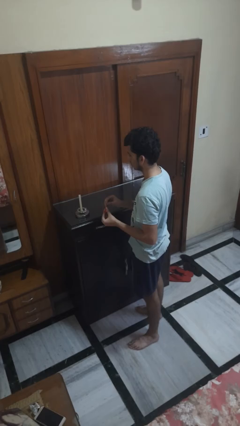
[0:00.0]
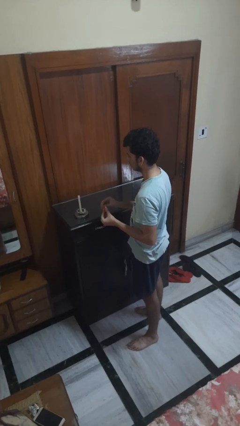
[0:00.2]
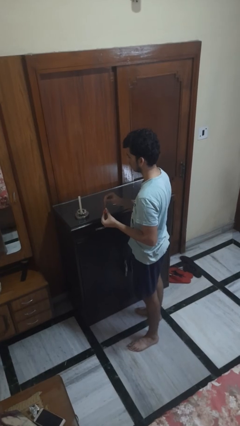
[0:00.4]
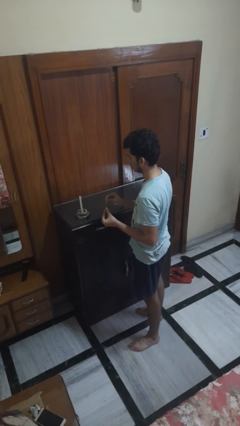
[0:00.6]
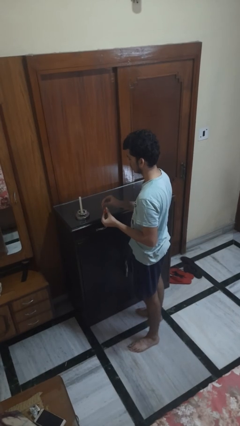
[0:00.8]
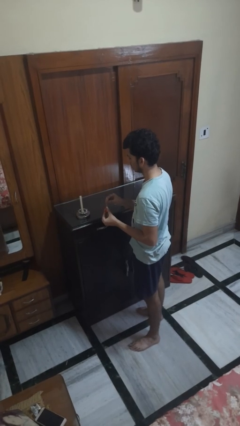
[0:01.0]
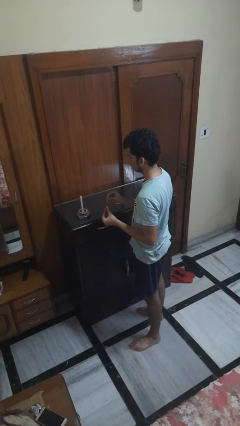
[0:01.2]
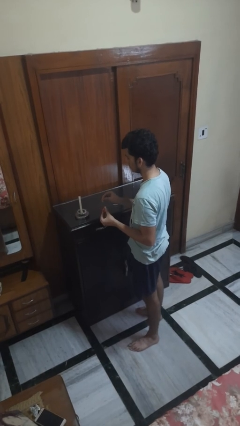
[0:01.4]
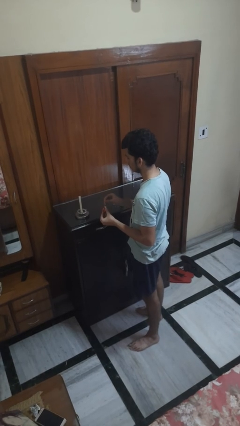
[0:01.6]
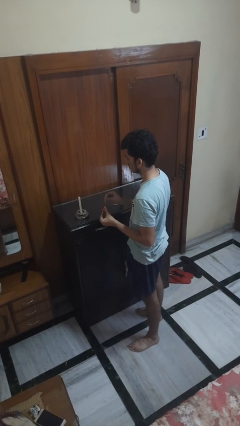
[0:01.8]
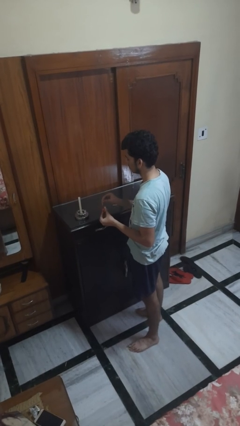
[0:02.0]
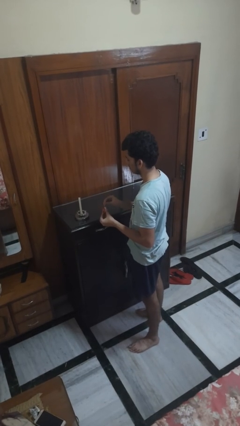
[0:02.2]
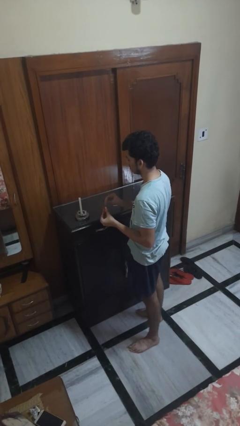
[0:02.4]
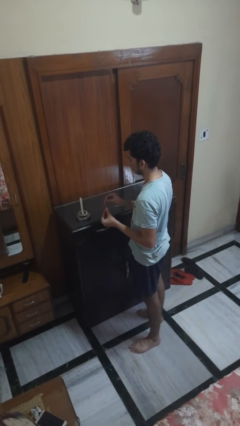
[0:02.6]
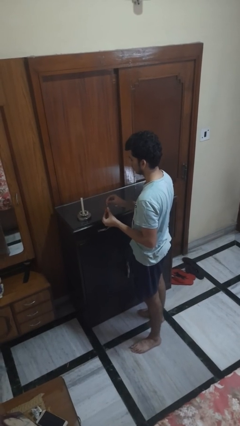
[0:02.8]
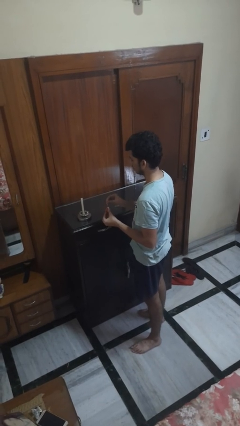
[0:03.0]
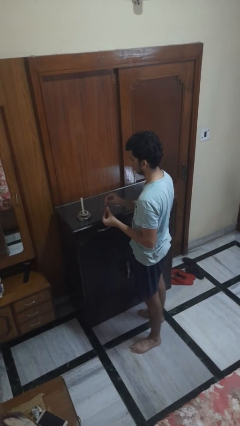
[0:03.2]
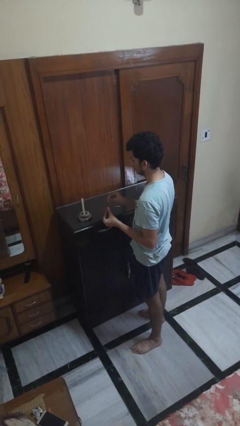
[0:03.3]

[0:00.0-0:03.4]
person lights candle

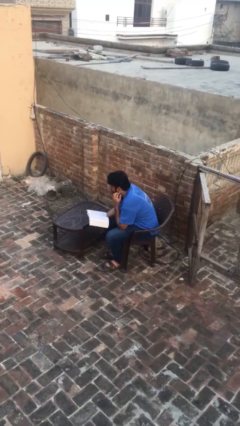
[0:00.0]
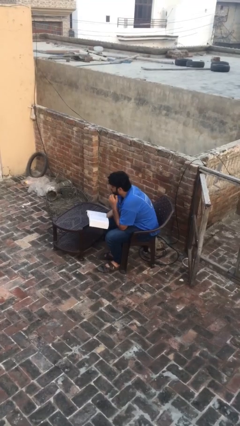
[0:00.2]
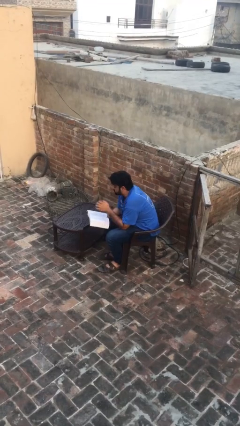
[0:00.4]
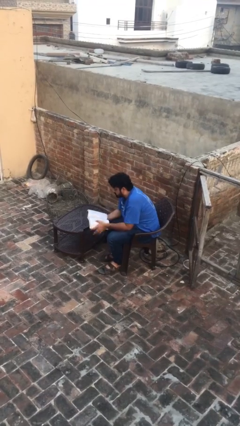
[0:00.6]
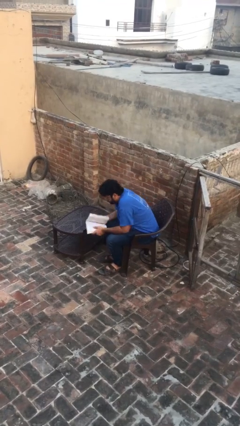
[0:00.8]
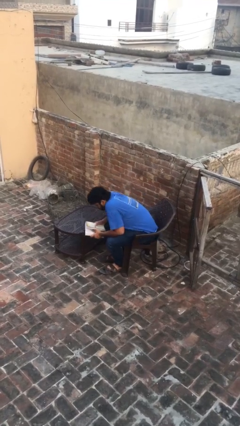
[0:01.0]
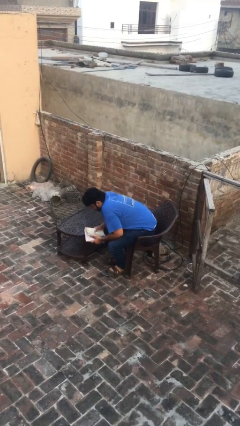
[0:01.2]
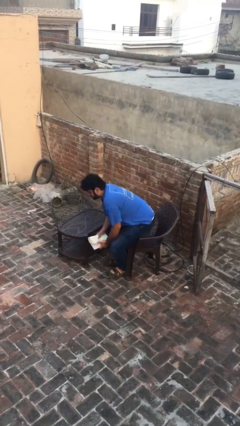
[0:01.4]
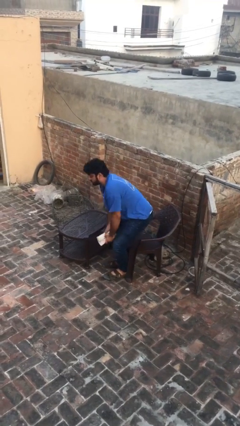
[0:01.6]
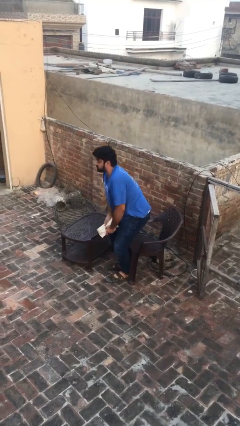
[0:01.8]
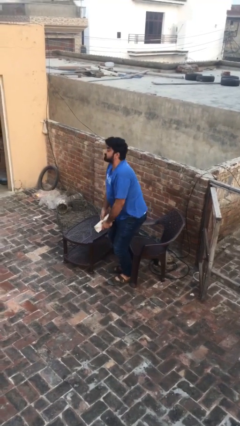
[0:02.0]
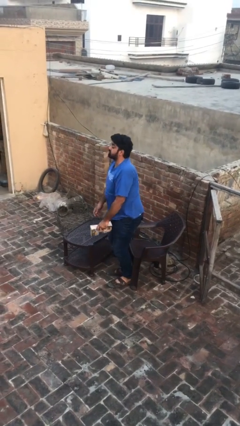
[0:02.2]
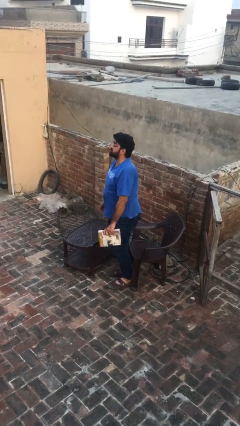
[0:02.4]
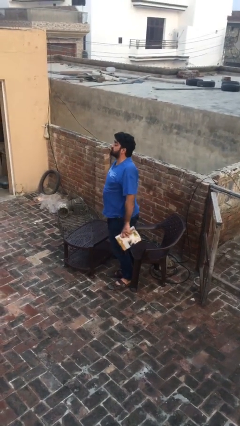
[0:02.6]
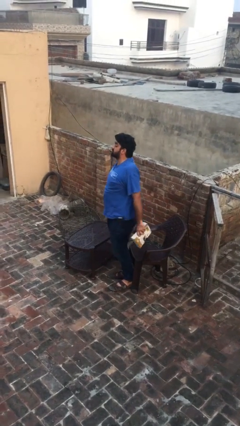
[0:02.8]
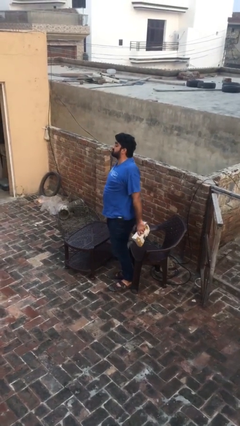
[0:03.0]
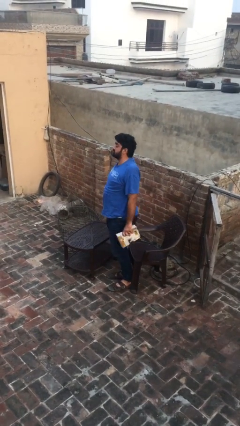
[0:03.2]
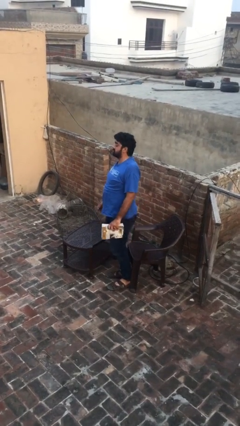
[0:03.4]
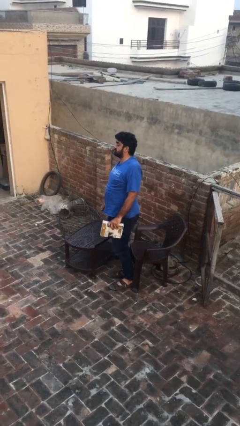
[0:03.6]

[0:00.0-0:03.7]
person stands up

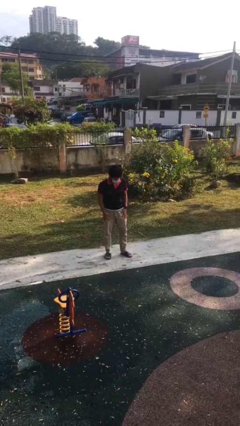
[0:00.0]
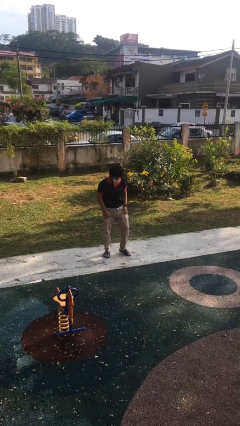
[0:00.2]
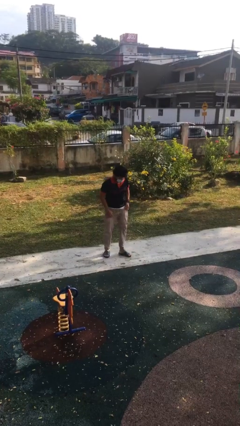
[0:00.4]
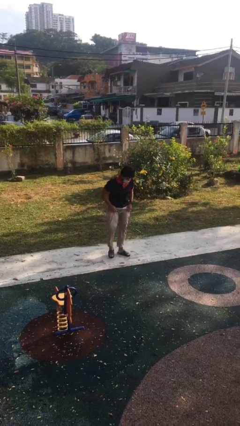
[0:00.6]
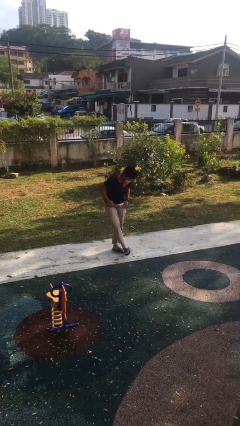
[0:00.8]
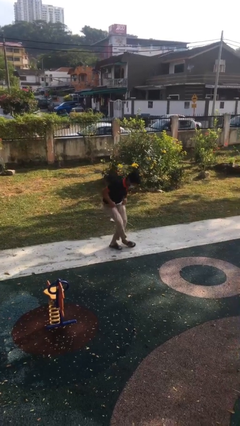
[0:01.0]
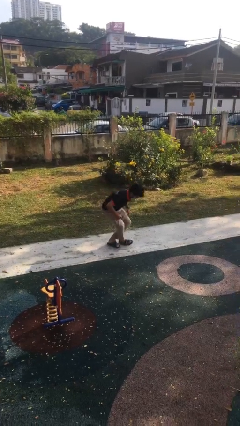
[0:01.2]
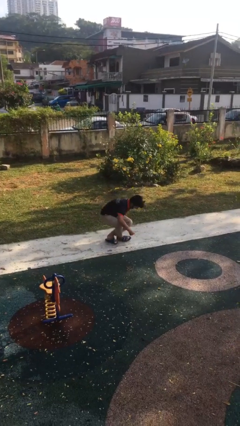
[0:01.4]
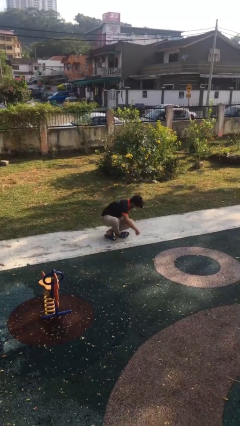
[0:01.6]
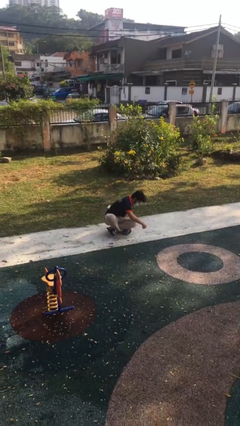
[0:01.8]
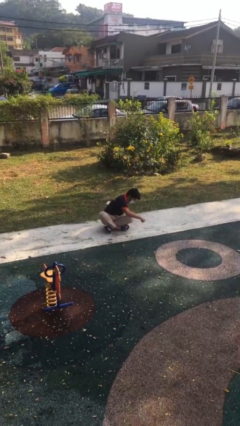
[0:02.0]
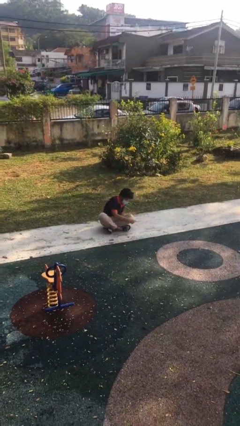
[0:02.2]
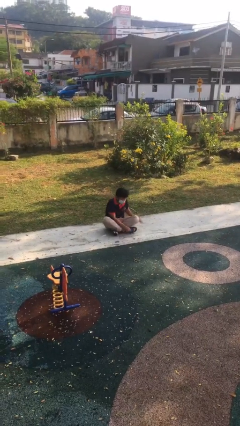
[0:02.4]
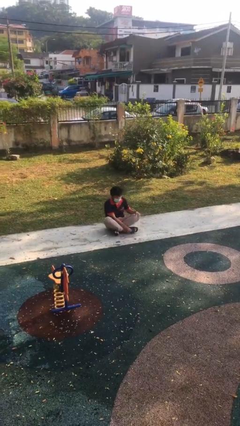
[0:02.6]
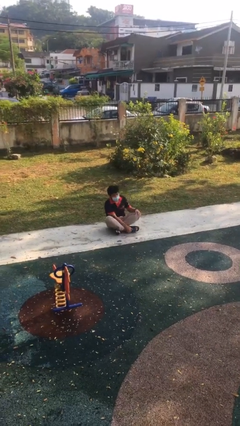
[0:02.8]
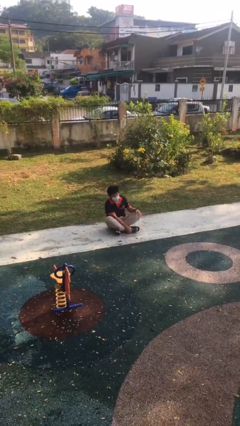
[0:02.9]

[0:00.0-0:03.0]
person sits crisscross

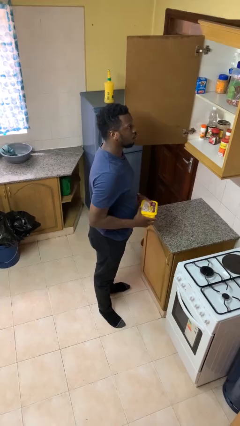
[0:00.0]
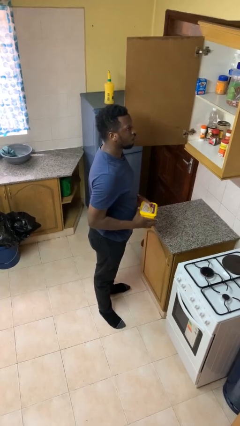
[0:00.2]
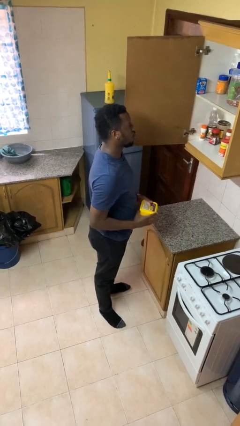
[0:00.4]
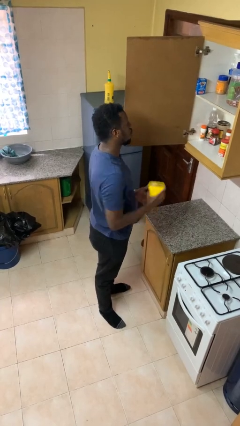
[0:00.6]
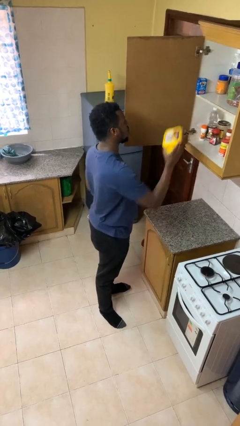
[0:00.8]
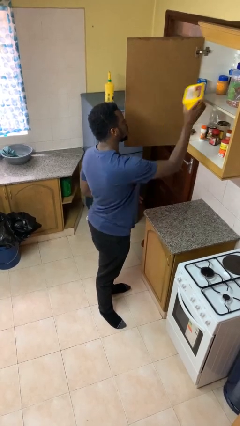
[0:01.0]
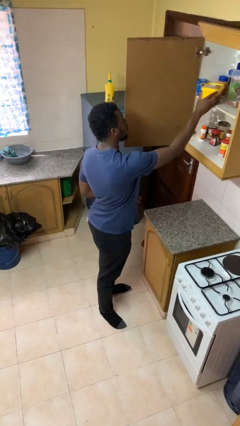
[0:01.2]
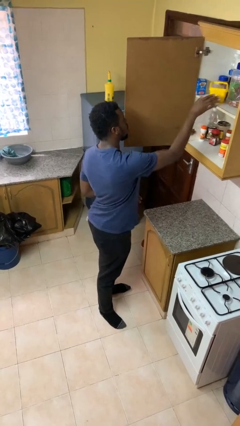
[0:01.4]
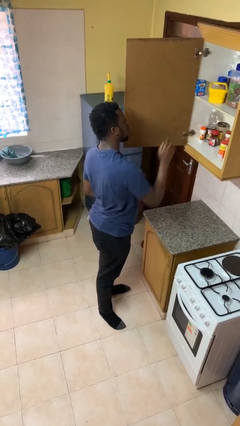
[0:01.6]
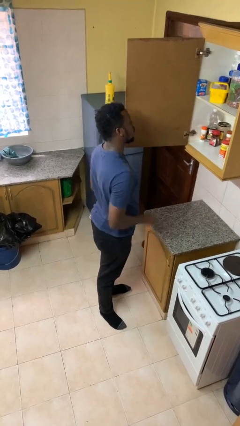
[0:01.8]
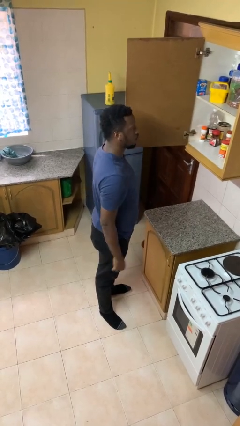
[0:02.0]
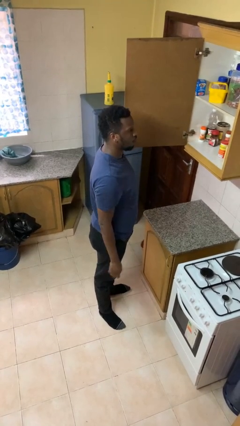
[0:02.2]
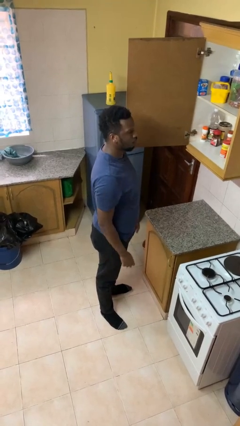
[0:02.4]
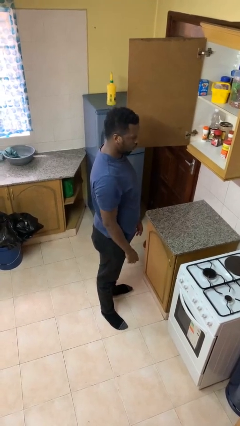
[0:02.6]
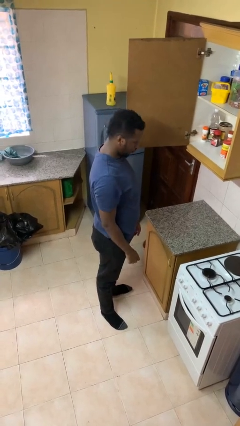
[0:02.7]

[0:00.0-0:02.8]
person puts down object on shelf

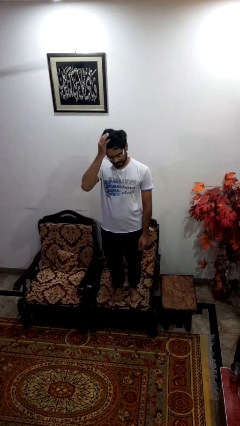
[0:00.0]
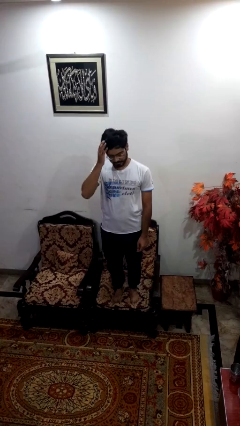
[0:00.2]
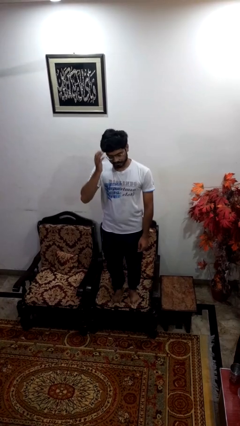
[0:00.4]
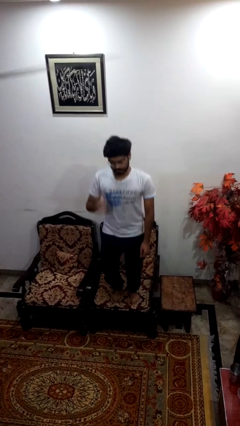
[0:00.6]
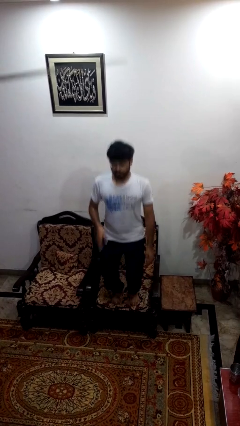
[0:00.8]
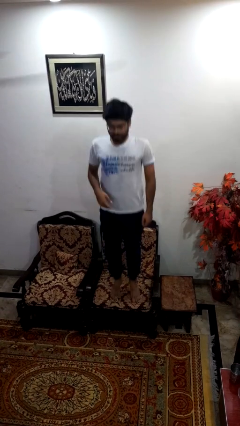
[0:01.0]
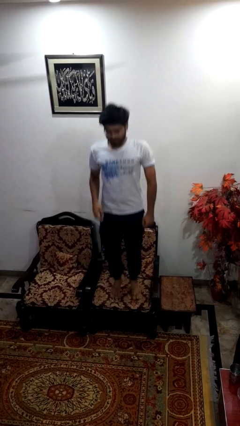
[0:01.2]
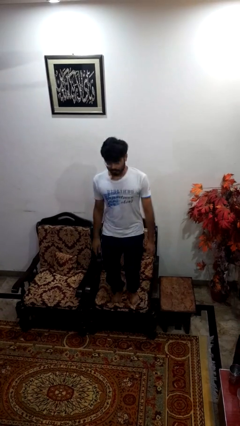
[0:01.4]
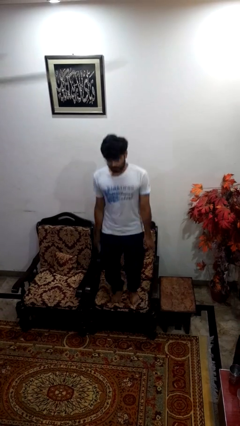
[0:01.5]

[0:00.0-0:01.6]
person jumps on couch

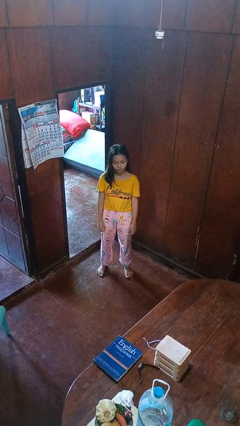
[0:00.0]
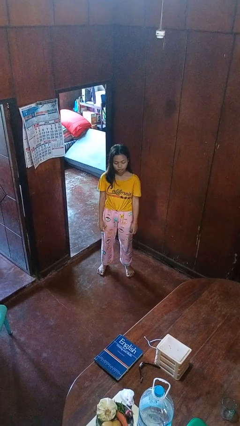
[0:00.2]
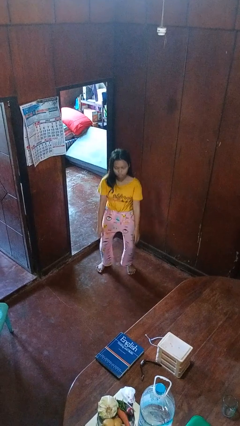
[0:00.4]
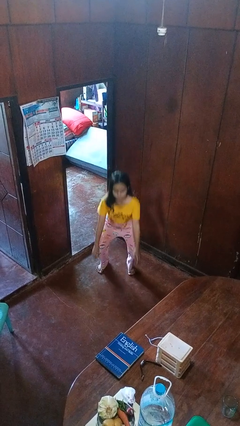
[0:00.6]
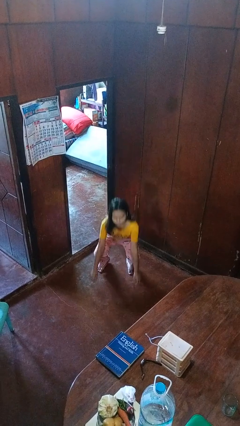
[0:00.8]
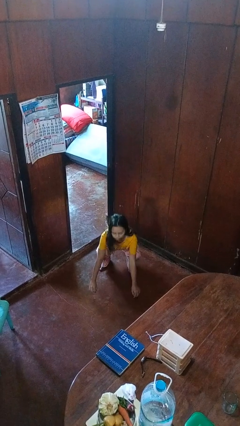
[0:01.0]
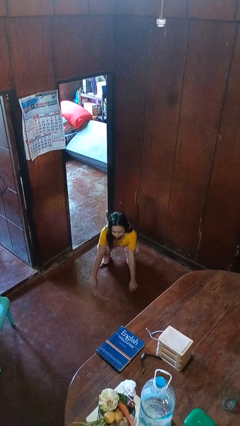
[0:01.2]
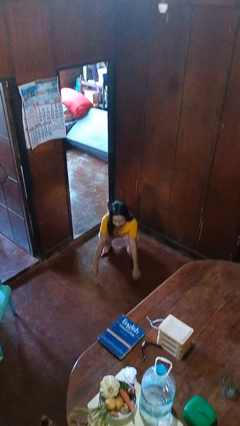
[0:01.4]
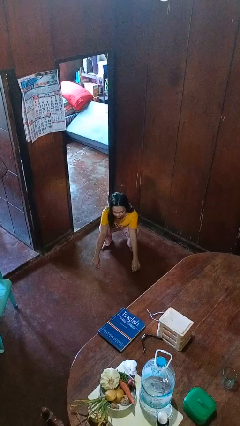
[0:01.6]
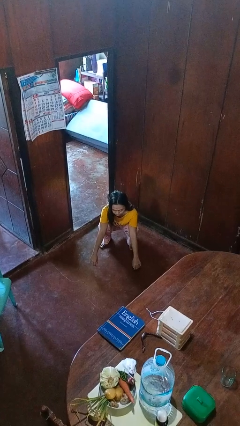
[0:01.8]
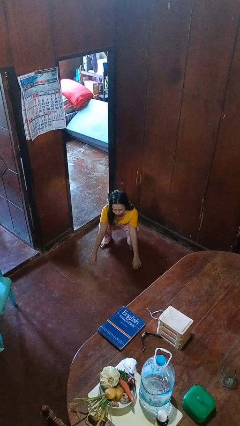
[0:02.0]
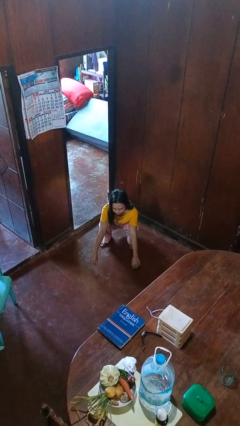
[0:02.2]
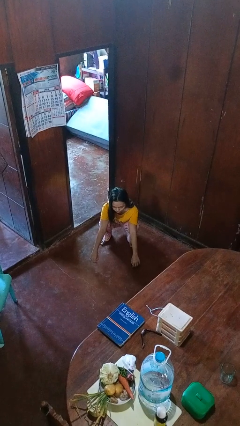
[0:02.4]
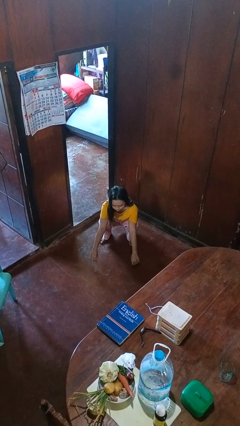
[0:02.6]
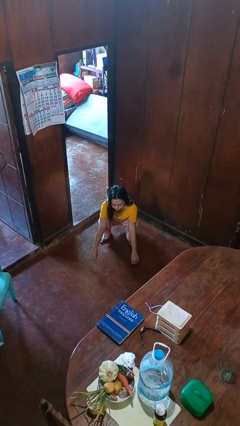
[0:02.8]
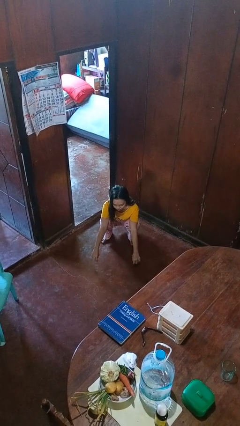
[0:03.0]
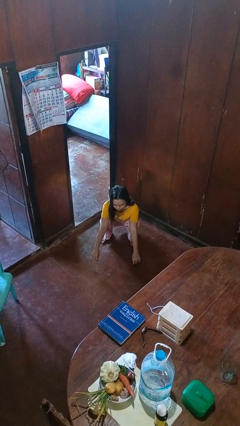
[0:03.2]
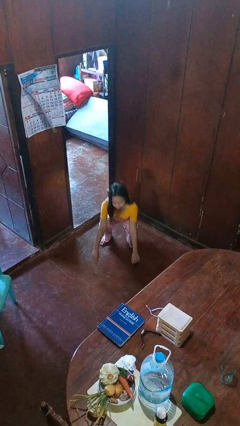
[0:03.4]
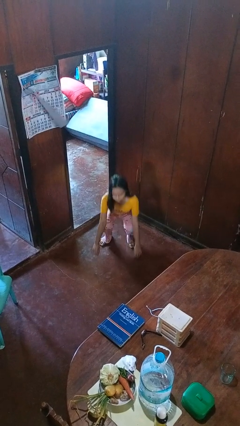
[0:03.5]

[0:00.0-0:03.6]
person squats
